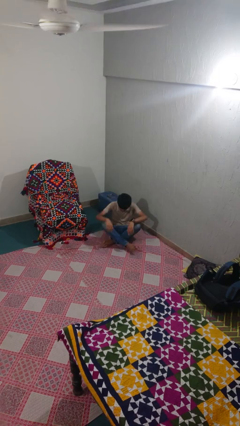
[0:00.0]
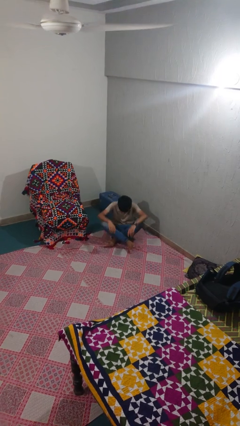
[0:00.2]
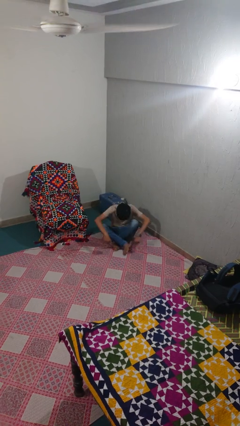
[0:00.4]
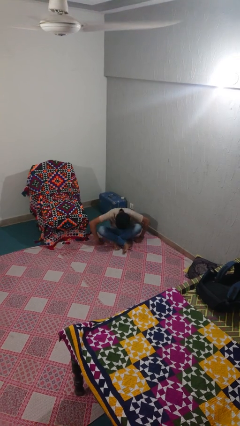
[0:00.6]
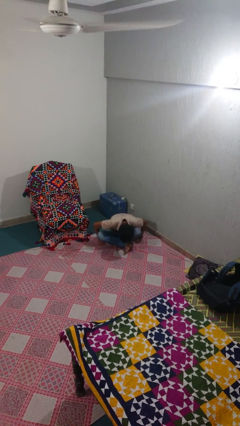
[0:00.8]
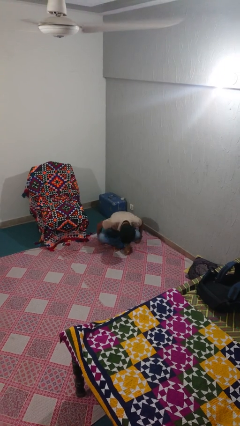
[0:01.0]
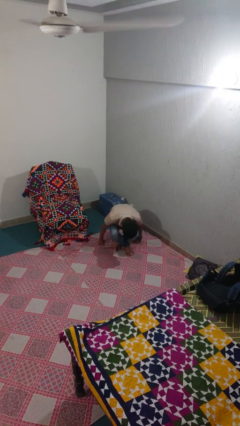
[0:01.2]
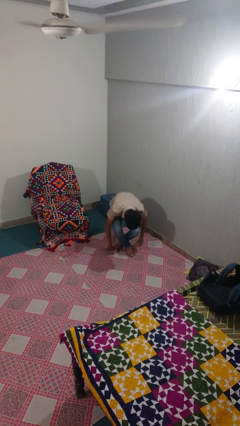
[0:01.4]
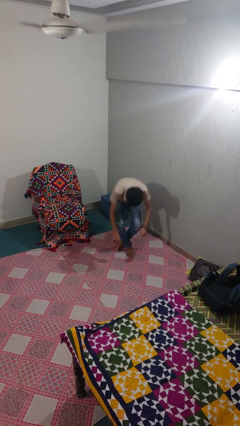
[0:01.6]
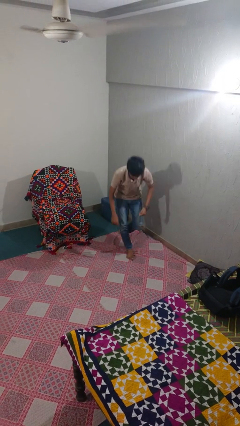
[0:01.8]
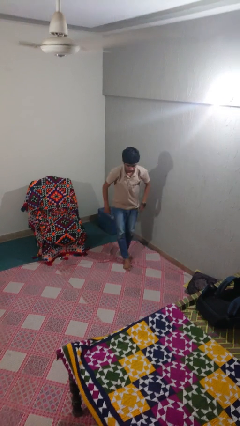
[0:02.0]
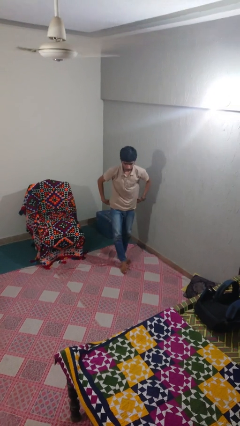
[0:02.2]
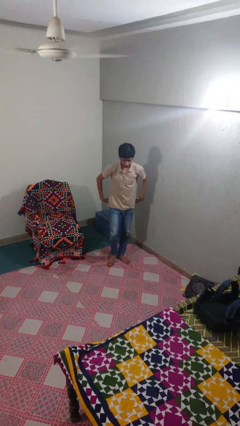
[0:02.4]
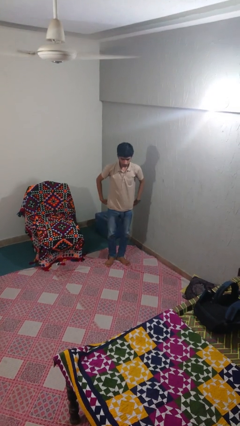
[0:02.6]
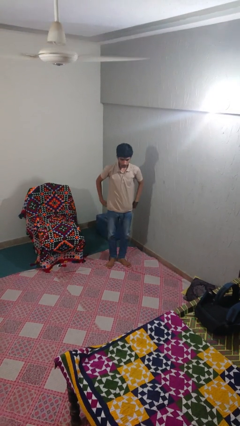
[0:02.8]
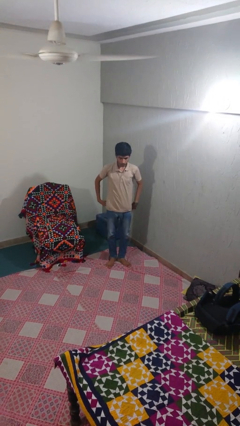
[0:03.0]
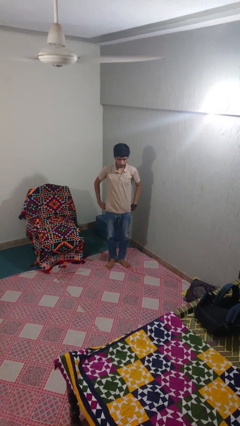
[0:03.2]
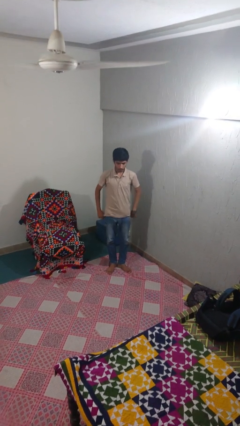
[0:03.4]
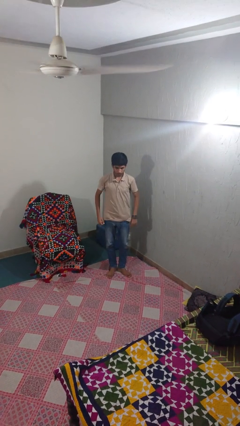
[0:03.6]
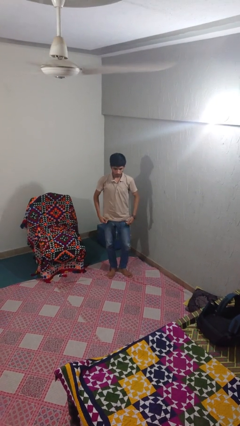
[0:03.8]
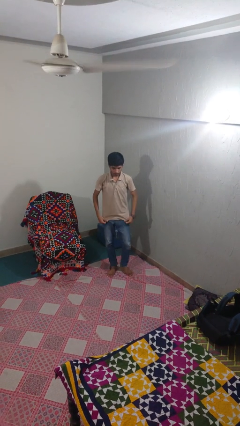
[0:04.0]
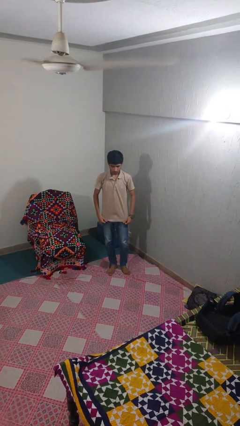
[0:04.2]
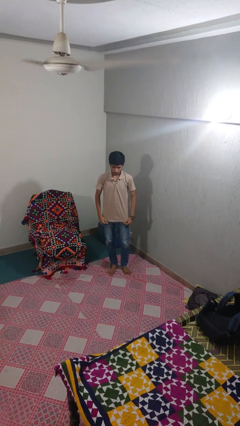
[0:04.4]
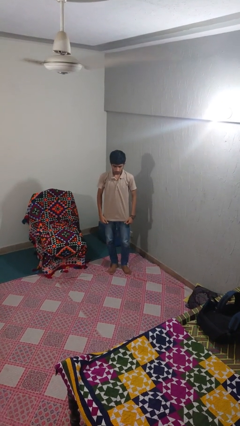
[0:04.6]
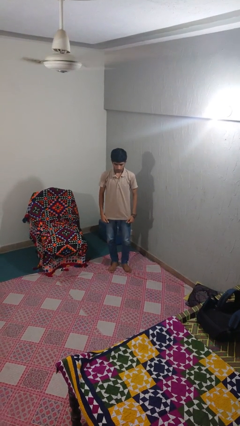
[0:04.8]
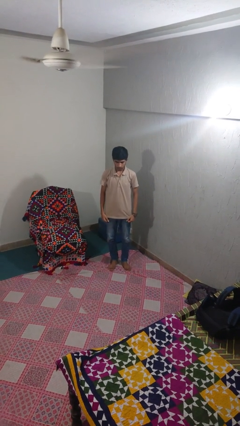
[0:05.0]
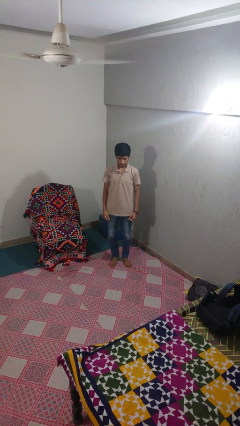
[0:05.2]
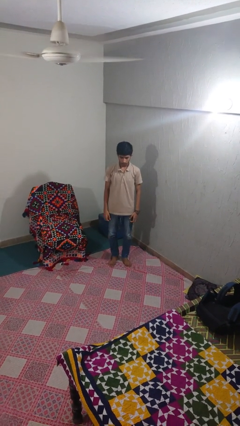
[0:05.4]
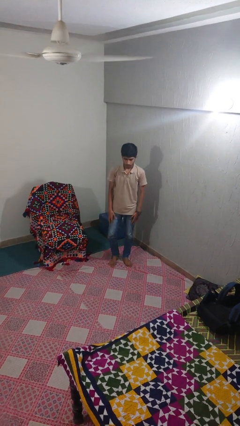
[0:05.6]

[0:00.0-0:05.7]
person stands up from floor

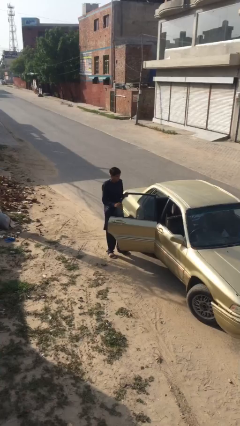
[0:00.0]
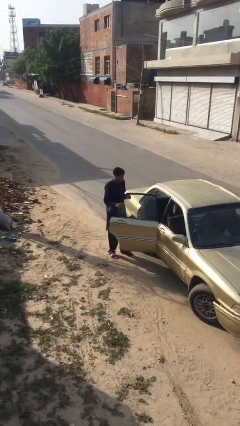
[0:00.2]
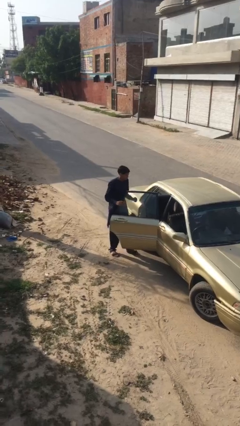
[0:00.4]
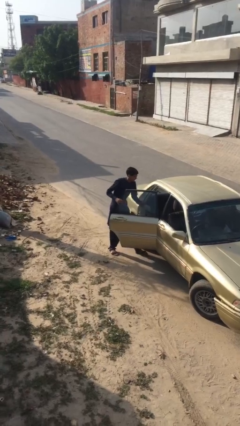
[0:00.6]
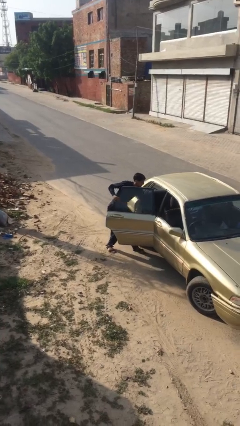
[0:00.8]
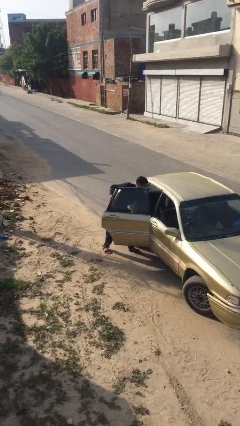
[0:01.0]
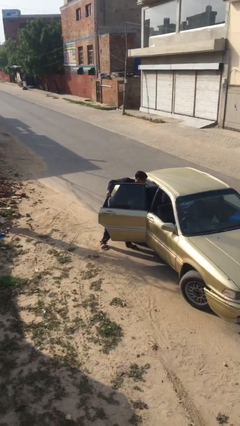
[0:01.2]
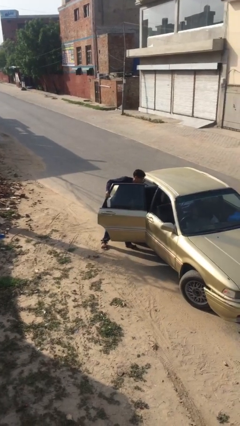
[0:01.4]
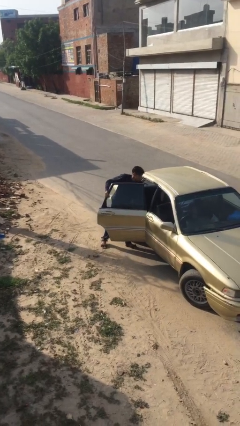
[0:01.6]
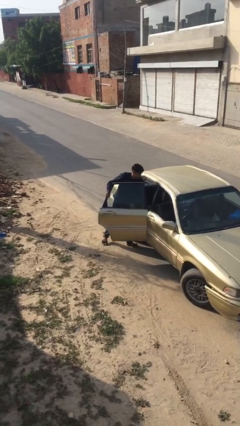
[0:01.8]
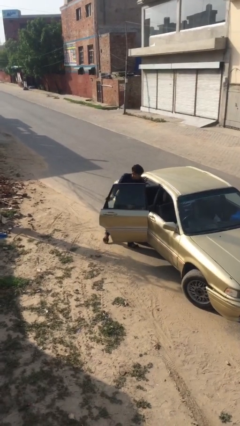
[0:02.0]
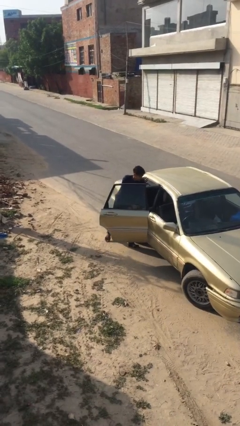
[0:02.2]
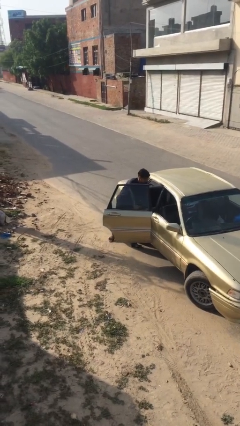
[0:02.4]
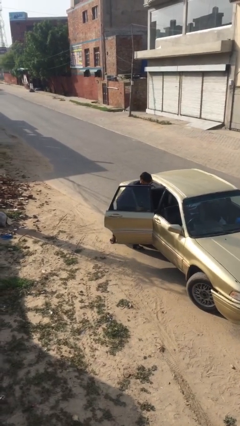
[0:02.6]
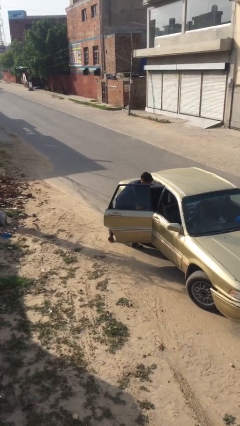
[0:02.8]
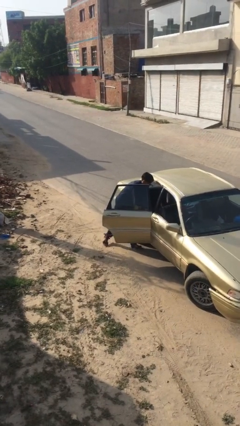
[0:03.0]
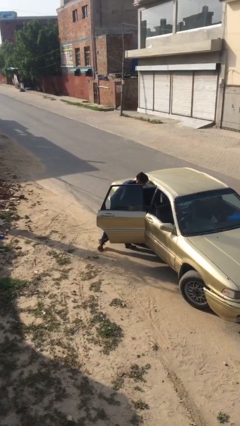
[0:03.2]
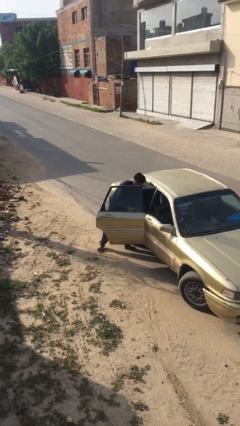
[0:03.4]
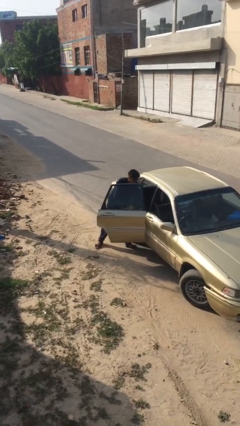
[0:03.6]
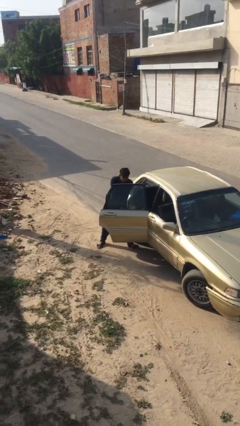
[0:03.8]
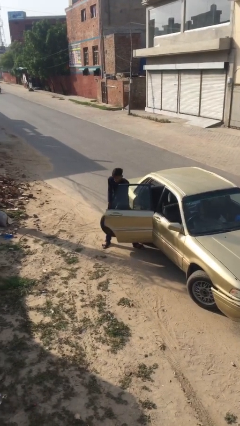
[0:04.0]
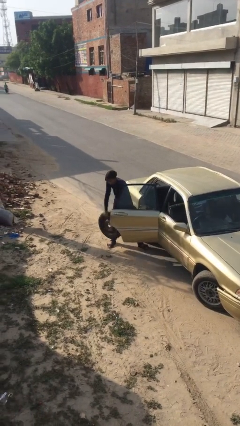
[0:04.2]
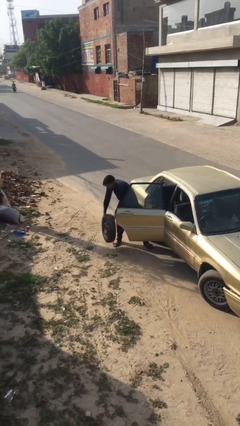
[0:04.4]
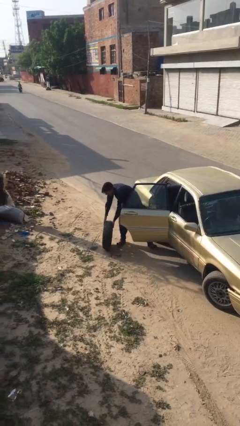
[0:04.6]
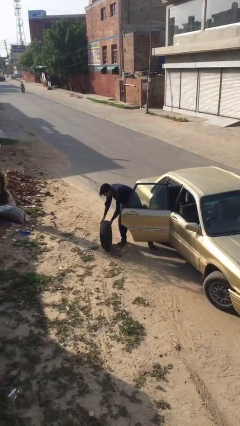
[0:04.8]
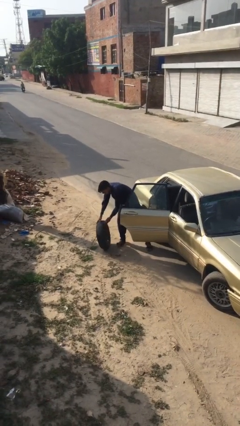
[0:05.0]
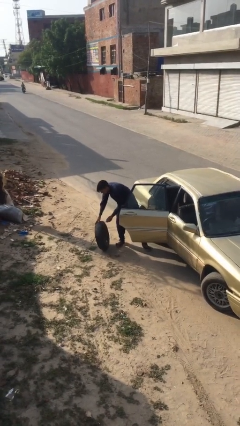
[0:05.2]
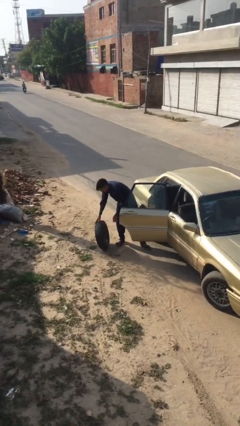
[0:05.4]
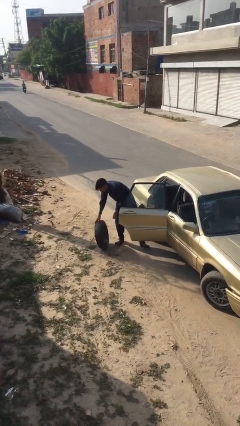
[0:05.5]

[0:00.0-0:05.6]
person unloads car

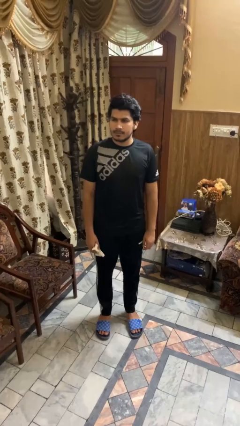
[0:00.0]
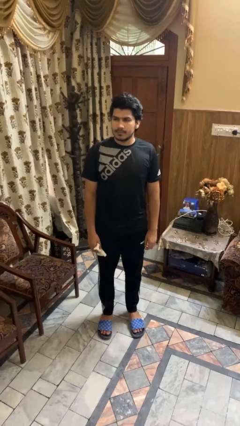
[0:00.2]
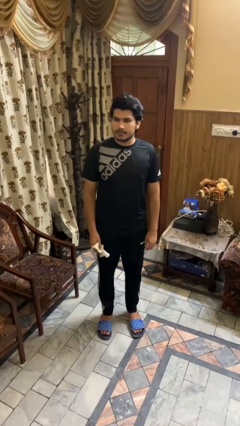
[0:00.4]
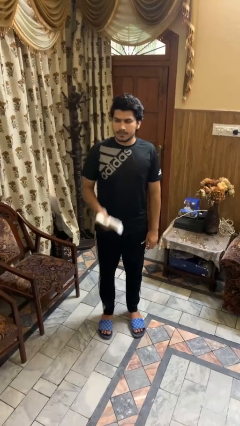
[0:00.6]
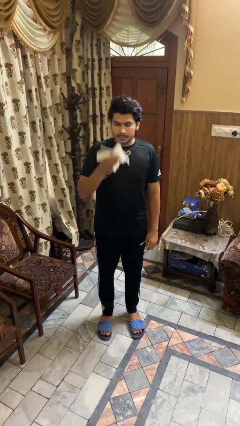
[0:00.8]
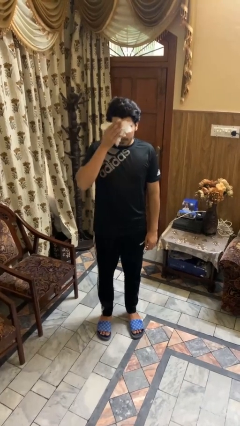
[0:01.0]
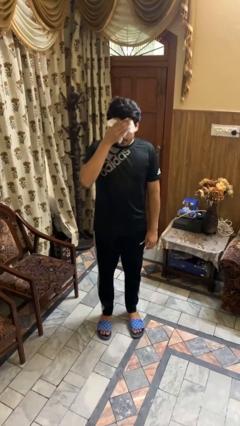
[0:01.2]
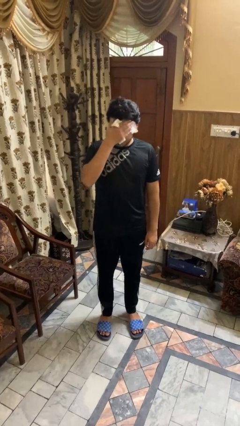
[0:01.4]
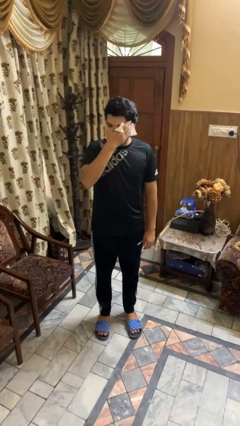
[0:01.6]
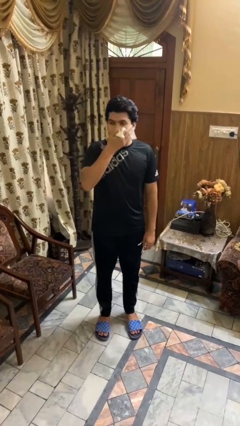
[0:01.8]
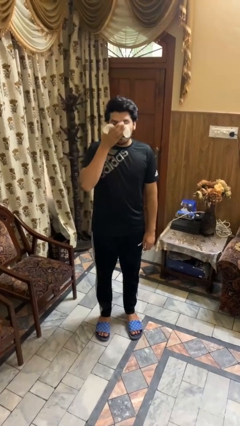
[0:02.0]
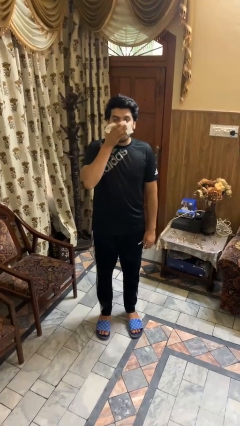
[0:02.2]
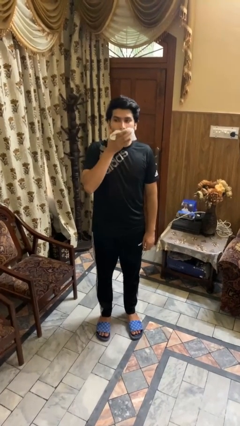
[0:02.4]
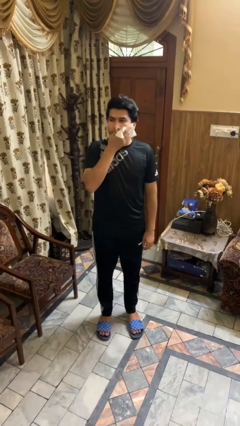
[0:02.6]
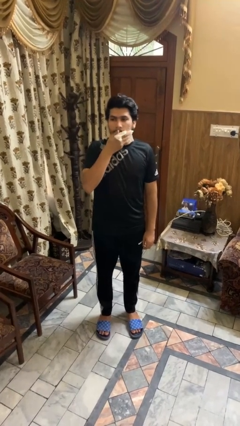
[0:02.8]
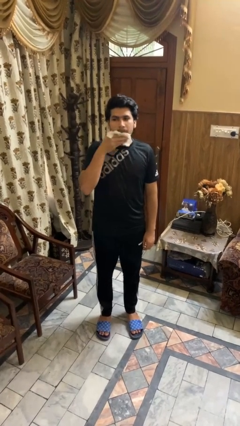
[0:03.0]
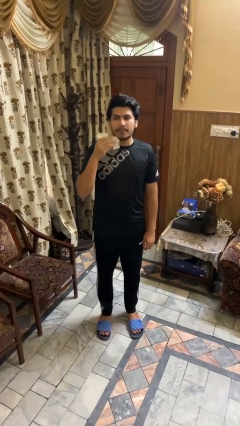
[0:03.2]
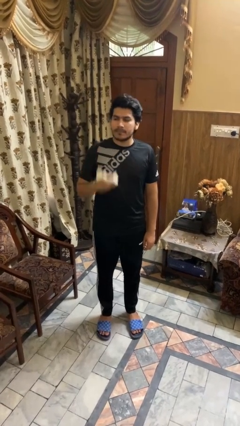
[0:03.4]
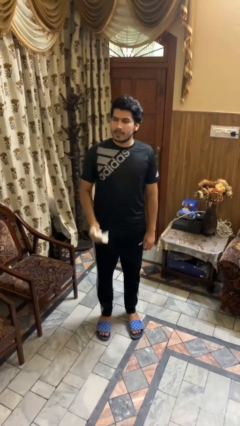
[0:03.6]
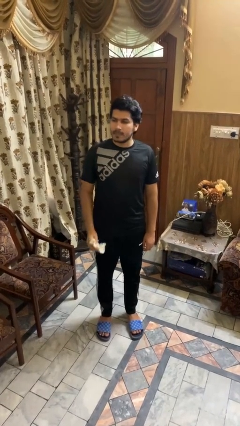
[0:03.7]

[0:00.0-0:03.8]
person wipes mouth with napkin

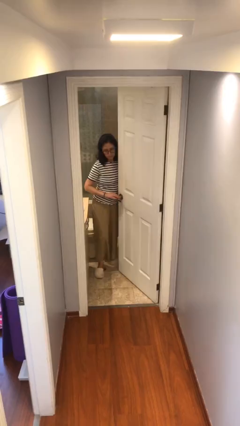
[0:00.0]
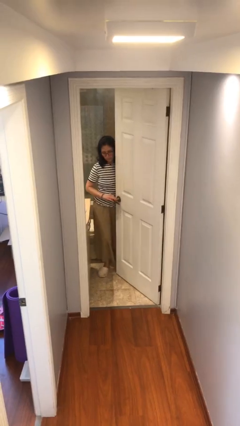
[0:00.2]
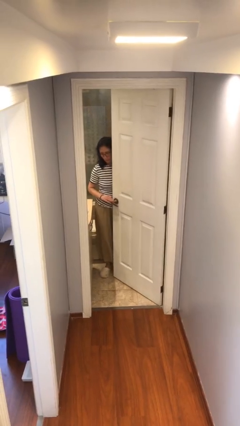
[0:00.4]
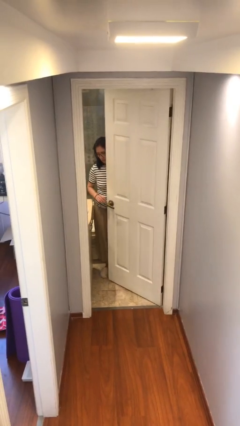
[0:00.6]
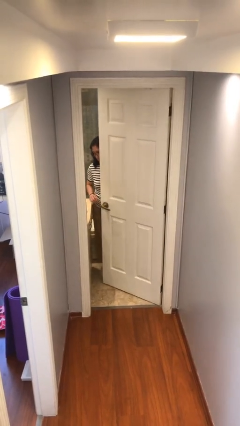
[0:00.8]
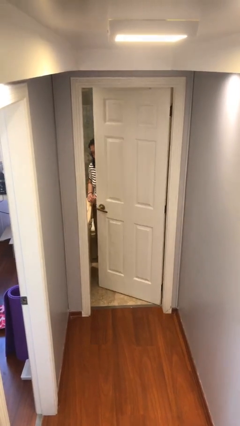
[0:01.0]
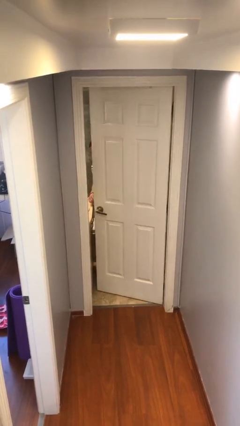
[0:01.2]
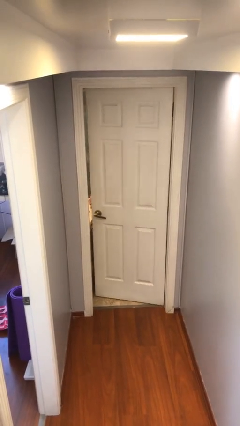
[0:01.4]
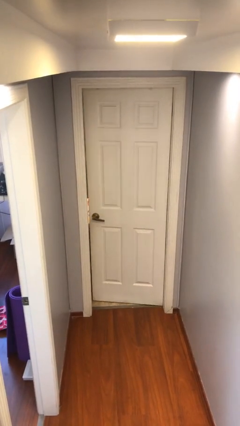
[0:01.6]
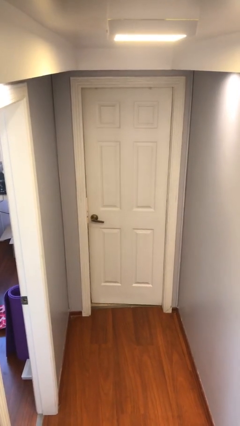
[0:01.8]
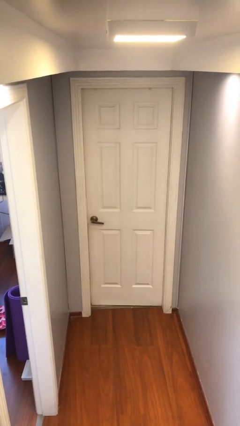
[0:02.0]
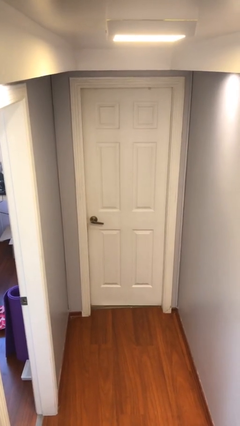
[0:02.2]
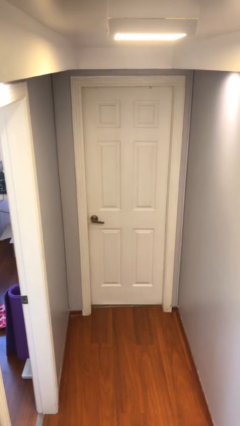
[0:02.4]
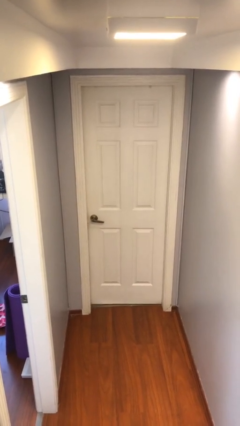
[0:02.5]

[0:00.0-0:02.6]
person closes facility door
